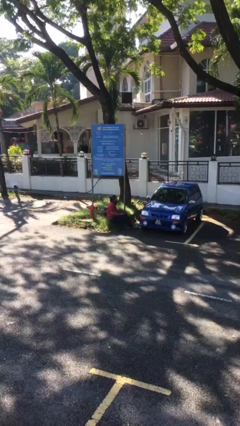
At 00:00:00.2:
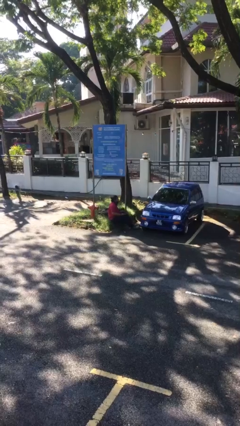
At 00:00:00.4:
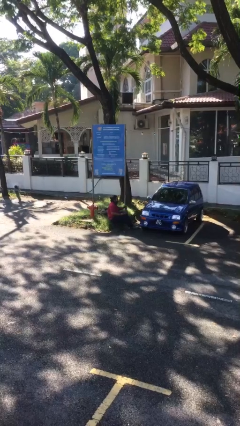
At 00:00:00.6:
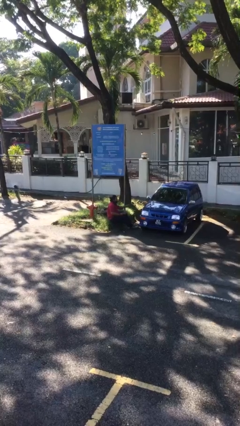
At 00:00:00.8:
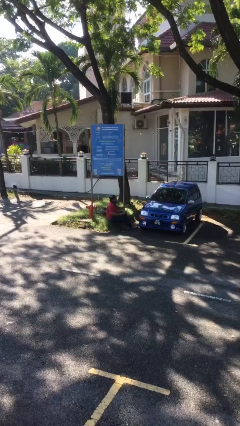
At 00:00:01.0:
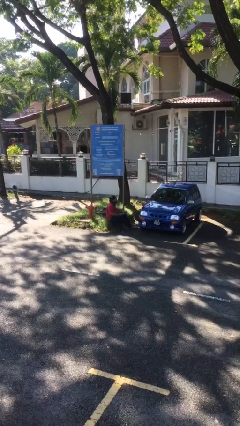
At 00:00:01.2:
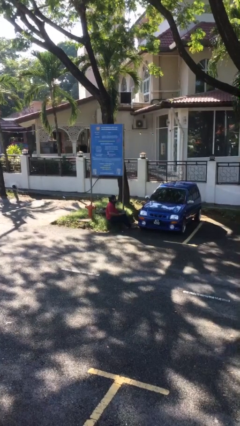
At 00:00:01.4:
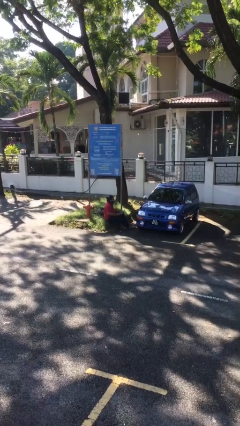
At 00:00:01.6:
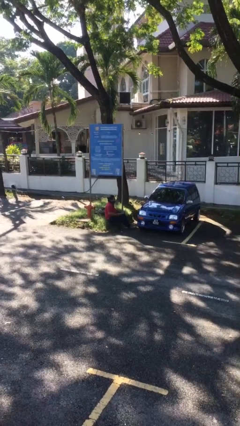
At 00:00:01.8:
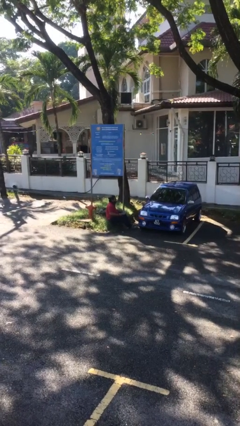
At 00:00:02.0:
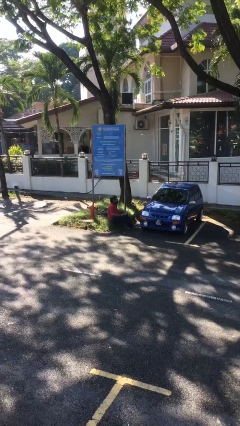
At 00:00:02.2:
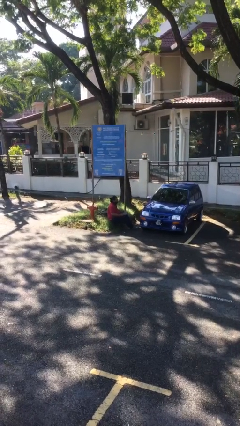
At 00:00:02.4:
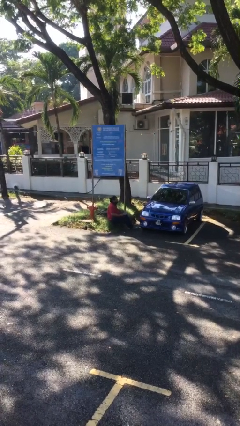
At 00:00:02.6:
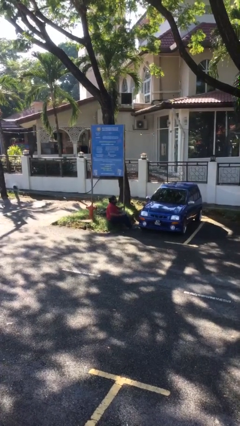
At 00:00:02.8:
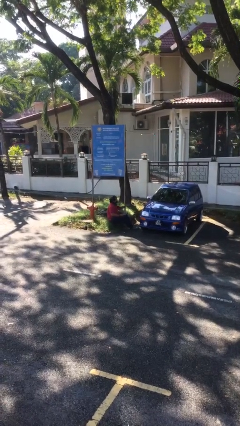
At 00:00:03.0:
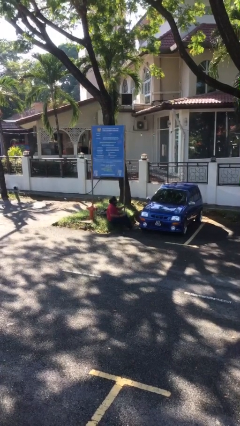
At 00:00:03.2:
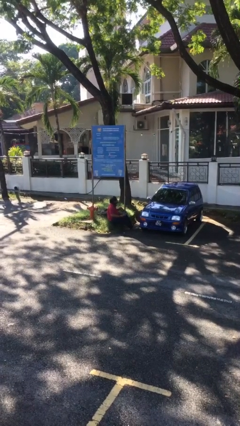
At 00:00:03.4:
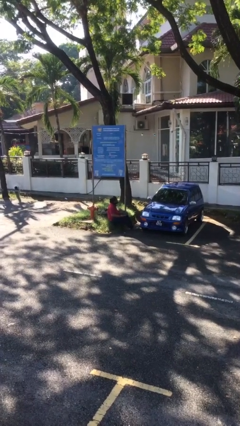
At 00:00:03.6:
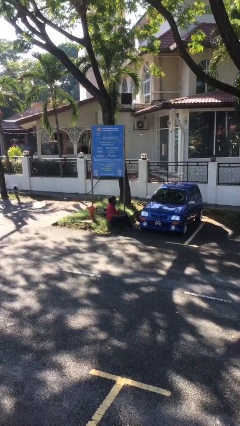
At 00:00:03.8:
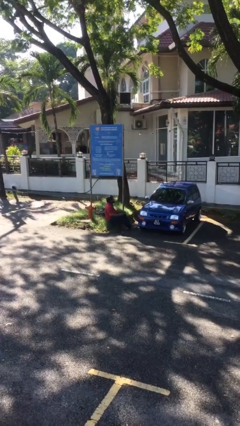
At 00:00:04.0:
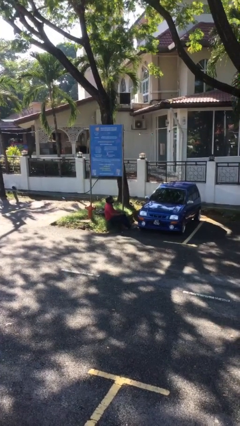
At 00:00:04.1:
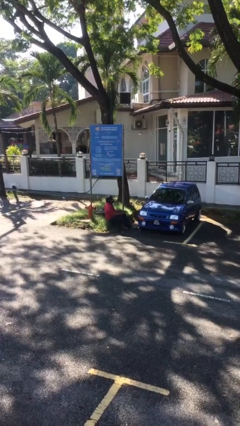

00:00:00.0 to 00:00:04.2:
person interacts with laptop

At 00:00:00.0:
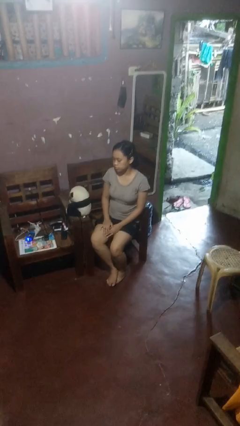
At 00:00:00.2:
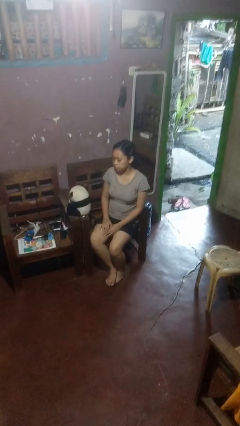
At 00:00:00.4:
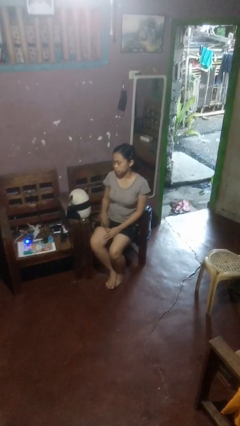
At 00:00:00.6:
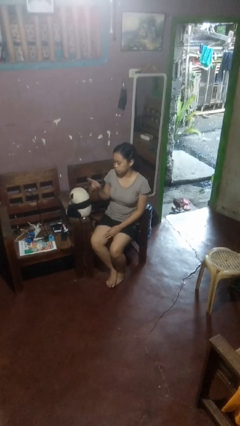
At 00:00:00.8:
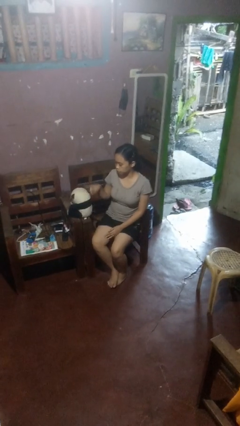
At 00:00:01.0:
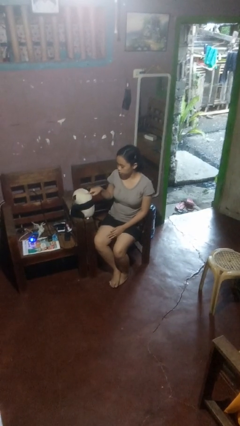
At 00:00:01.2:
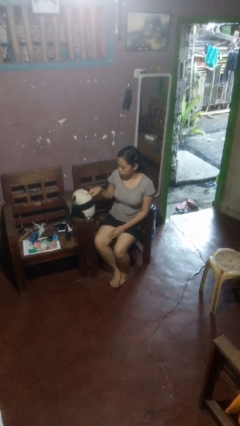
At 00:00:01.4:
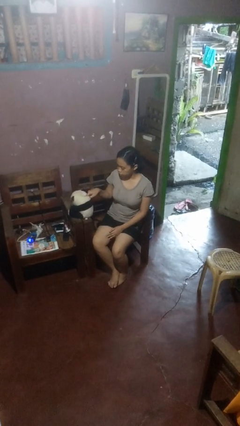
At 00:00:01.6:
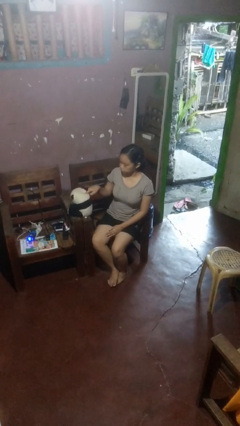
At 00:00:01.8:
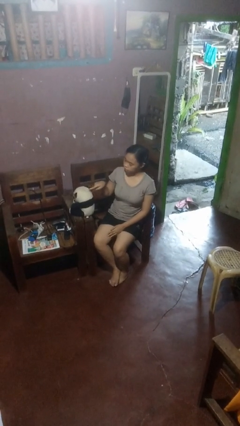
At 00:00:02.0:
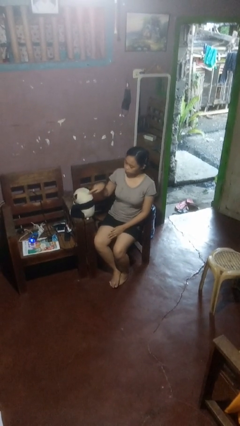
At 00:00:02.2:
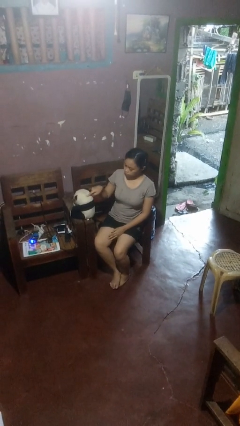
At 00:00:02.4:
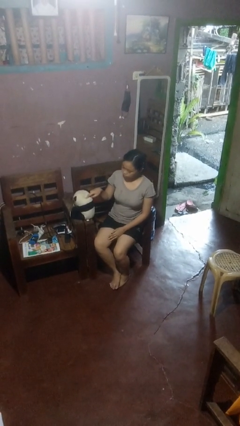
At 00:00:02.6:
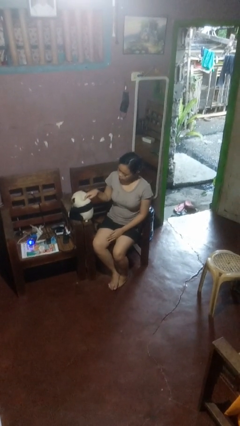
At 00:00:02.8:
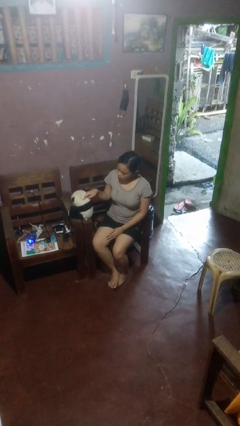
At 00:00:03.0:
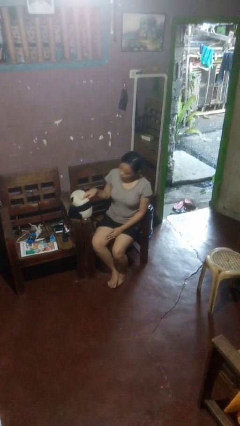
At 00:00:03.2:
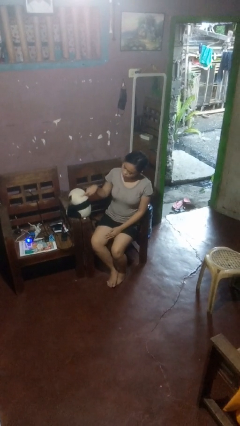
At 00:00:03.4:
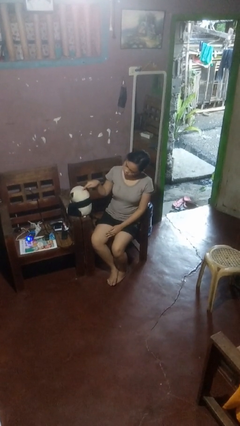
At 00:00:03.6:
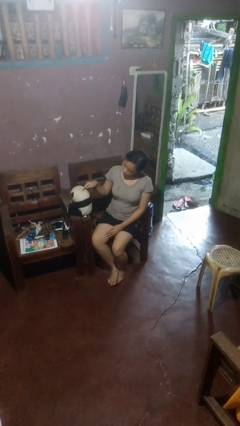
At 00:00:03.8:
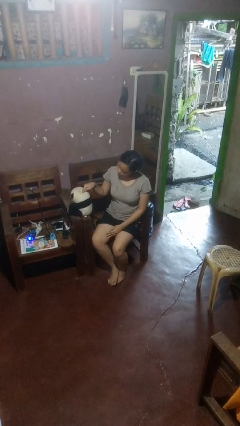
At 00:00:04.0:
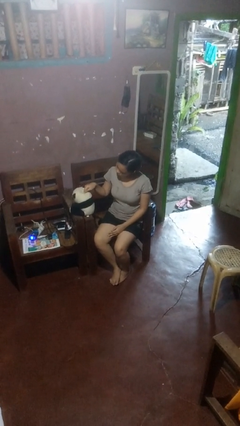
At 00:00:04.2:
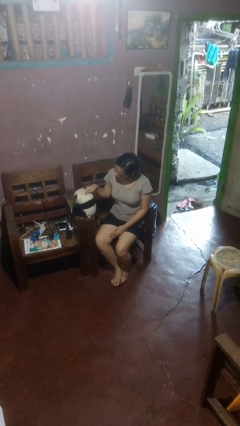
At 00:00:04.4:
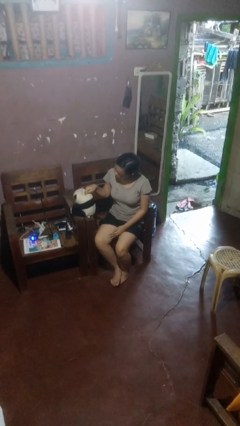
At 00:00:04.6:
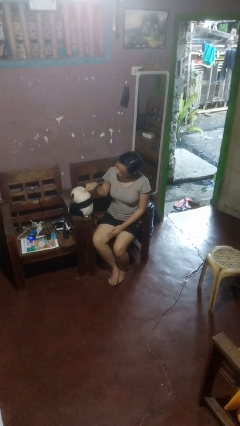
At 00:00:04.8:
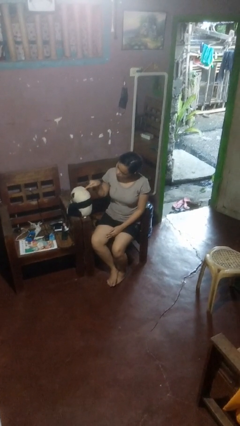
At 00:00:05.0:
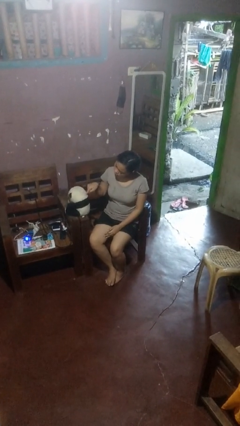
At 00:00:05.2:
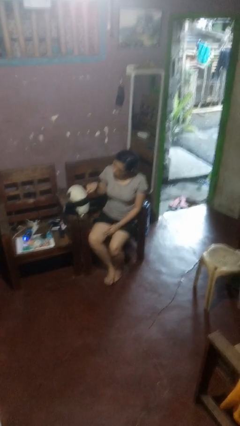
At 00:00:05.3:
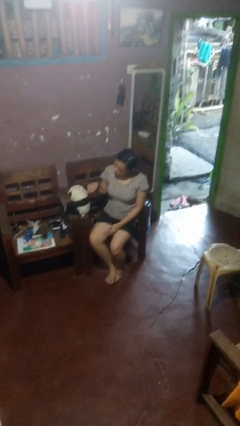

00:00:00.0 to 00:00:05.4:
person taps object with finger

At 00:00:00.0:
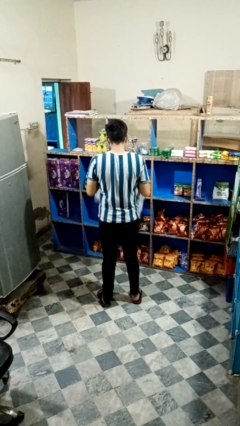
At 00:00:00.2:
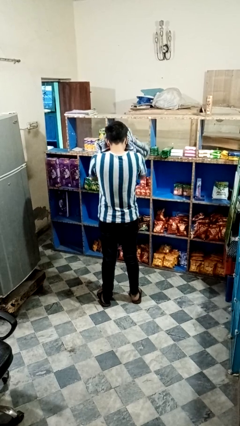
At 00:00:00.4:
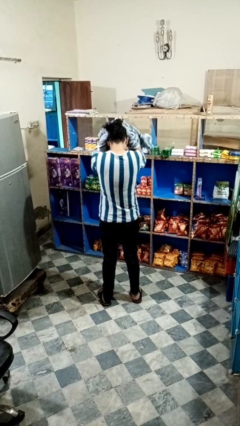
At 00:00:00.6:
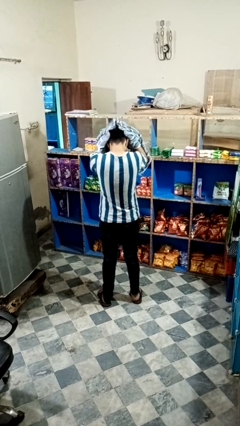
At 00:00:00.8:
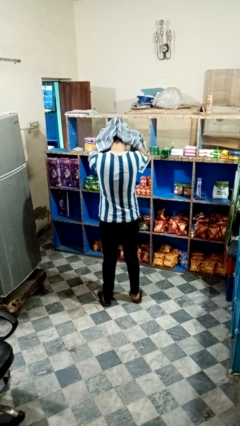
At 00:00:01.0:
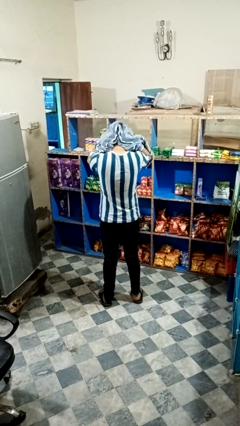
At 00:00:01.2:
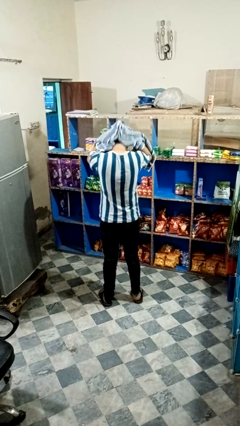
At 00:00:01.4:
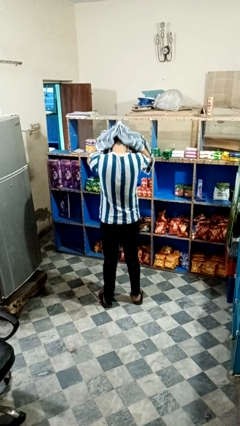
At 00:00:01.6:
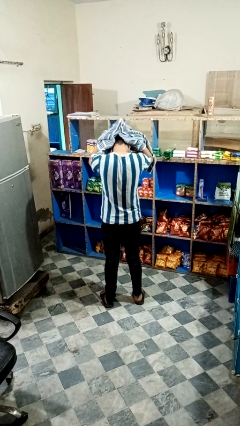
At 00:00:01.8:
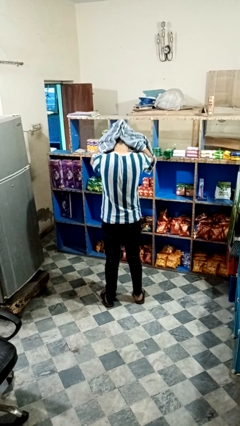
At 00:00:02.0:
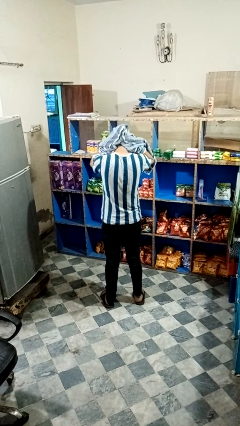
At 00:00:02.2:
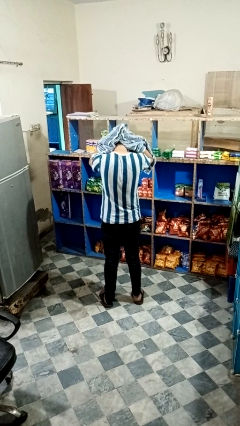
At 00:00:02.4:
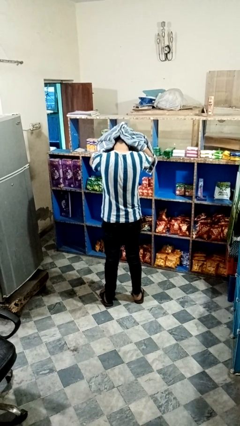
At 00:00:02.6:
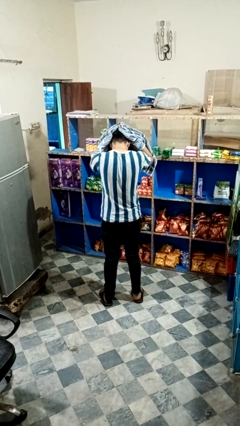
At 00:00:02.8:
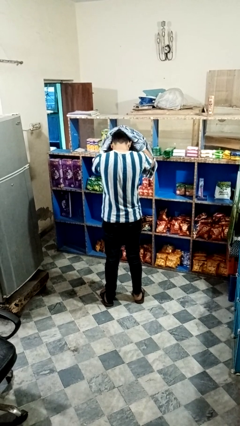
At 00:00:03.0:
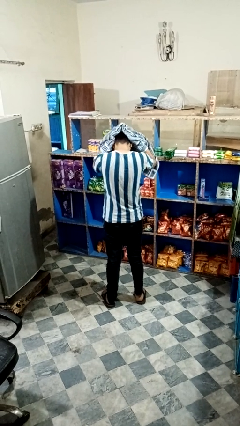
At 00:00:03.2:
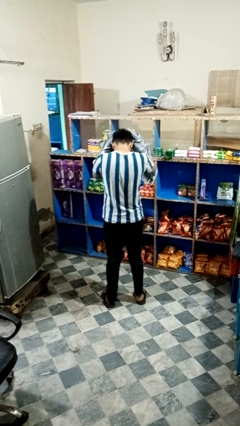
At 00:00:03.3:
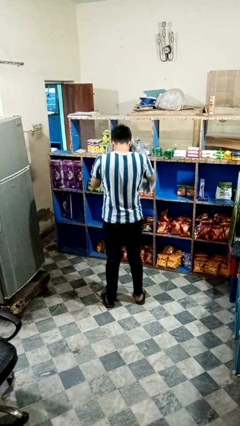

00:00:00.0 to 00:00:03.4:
person dries hair with towel

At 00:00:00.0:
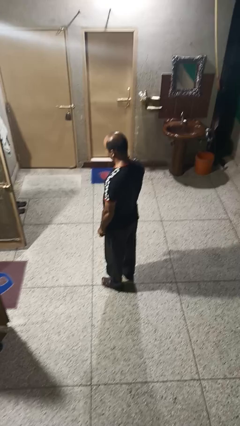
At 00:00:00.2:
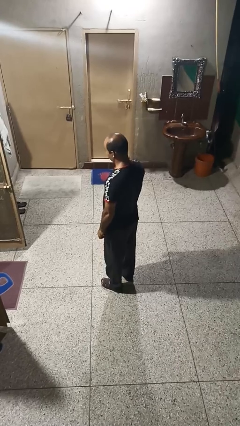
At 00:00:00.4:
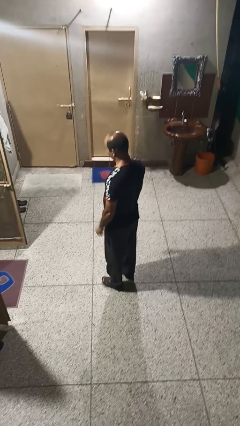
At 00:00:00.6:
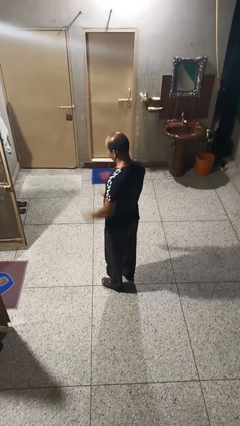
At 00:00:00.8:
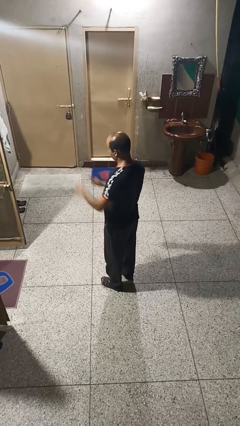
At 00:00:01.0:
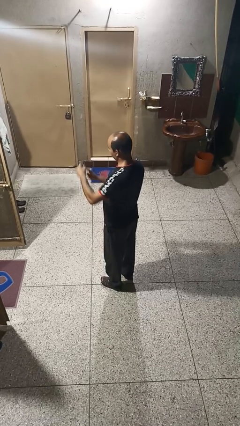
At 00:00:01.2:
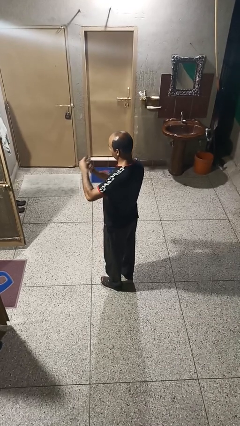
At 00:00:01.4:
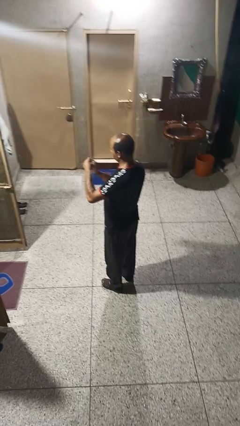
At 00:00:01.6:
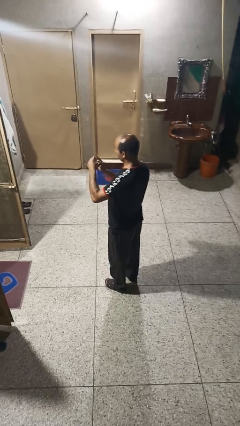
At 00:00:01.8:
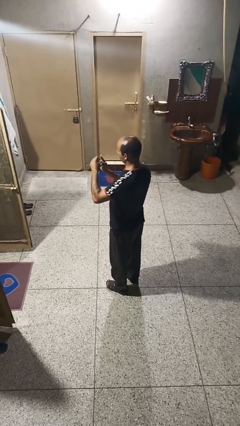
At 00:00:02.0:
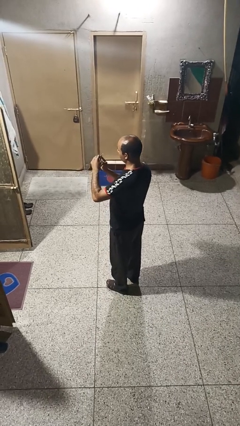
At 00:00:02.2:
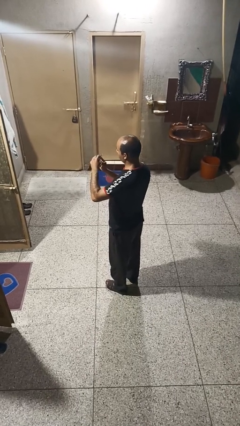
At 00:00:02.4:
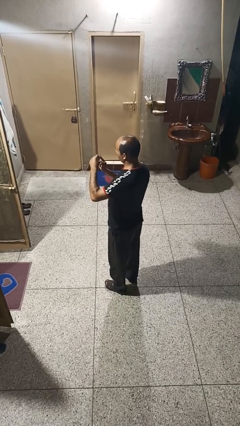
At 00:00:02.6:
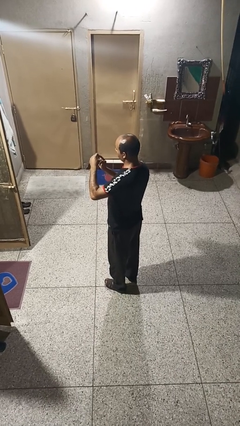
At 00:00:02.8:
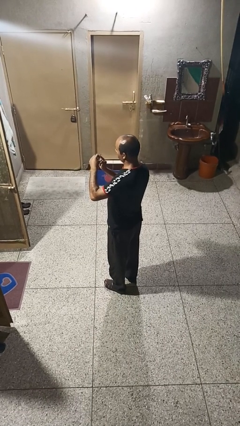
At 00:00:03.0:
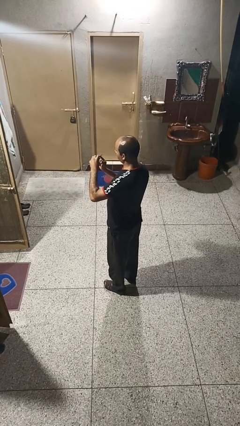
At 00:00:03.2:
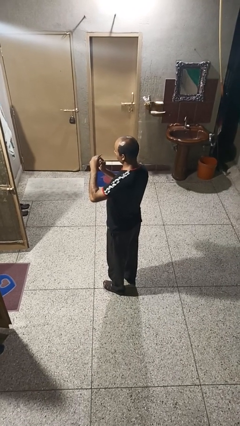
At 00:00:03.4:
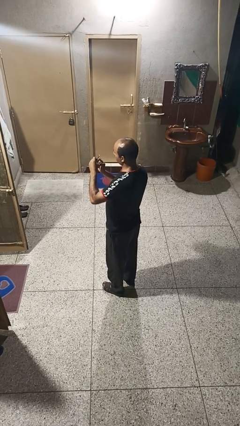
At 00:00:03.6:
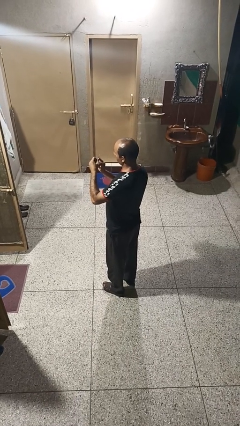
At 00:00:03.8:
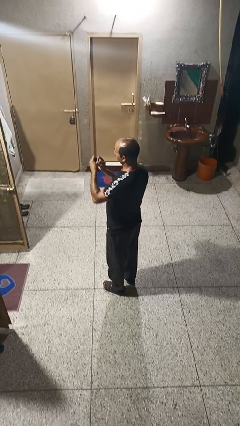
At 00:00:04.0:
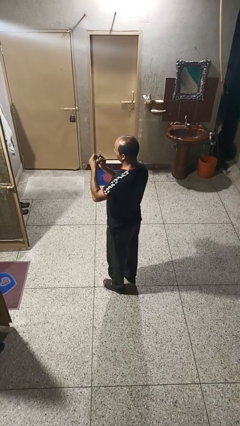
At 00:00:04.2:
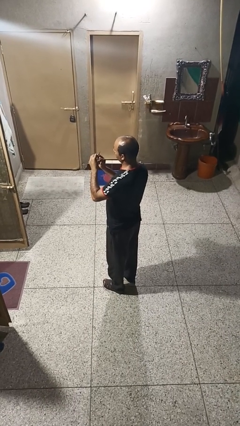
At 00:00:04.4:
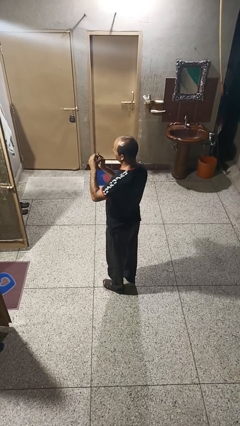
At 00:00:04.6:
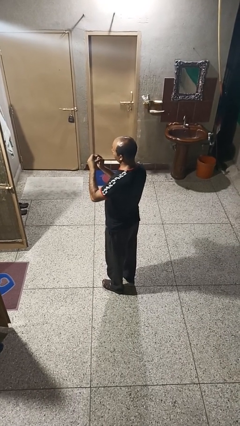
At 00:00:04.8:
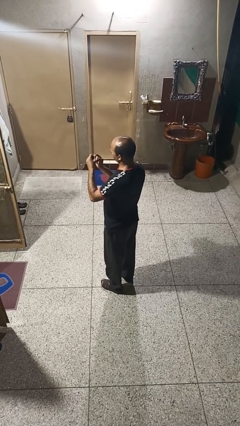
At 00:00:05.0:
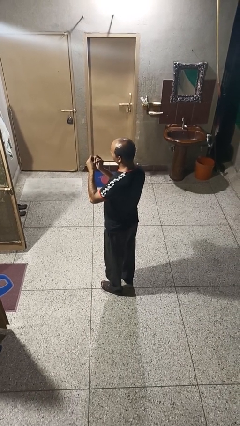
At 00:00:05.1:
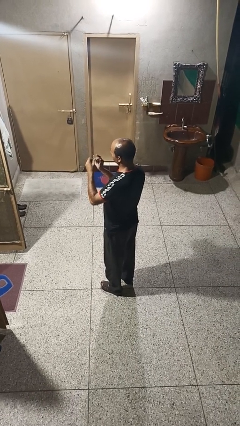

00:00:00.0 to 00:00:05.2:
person files fingernails
